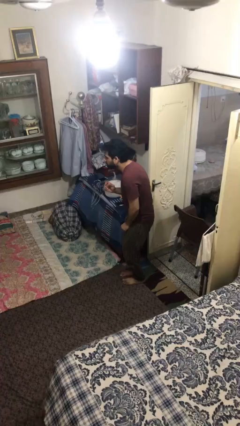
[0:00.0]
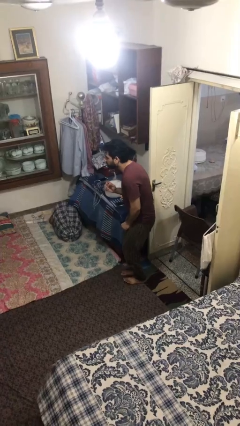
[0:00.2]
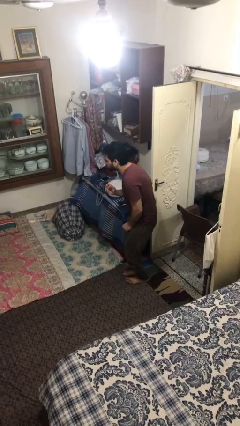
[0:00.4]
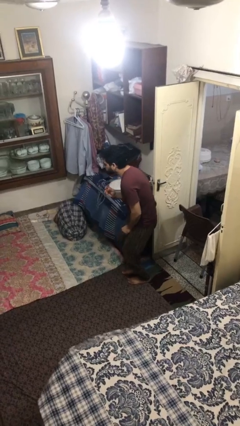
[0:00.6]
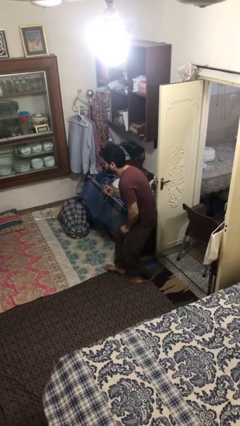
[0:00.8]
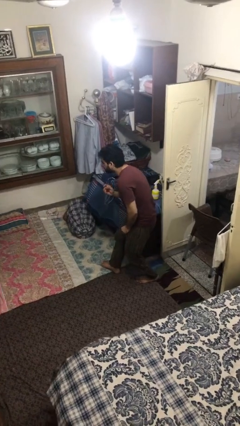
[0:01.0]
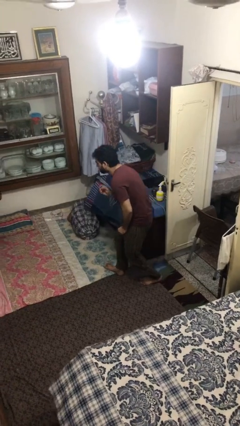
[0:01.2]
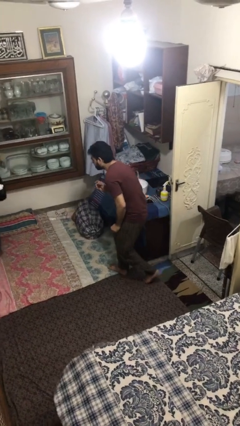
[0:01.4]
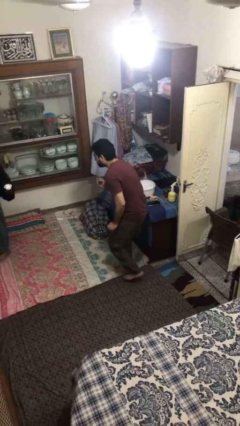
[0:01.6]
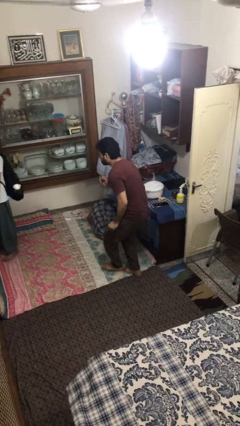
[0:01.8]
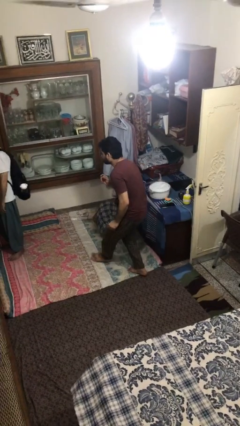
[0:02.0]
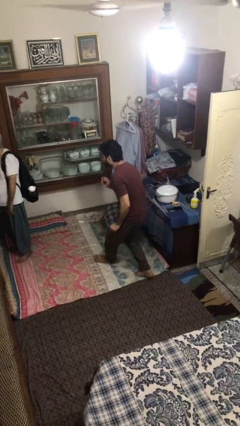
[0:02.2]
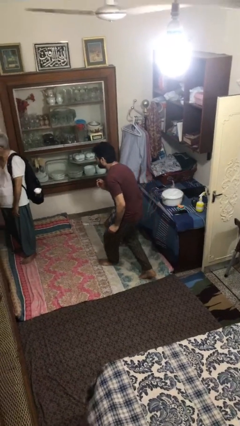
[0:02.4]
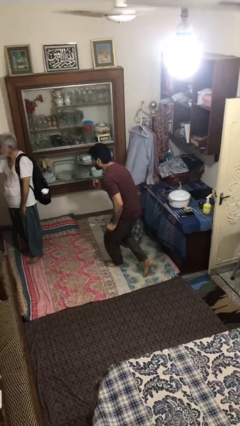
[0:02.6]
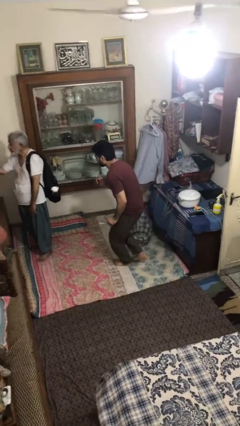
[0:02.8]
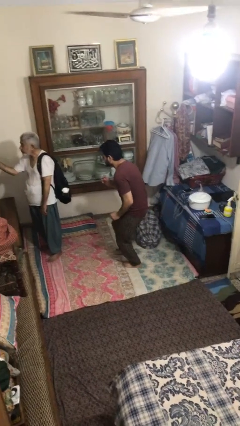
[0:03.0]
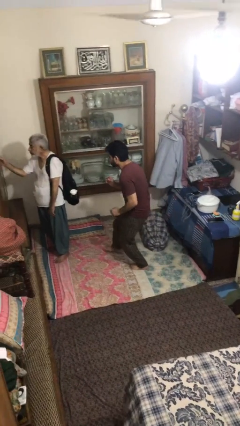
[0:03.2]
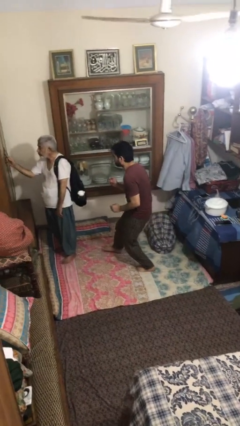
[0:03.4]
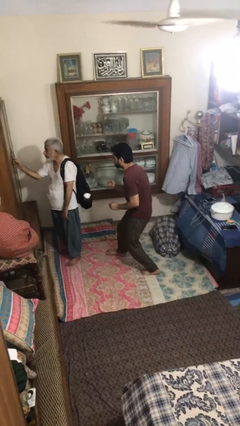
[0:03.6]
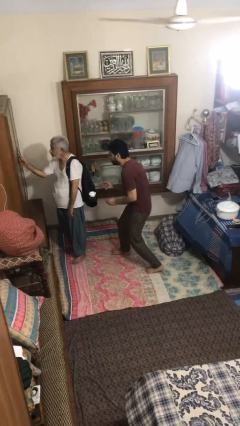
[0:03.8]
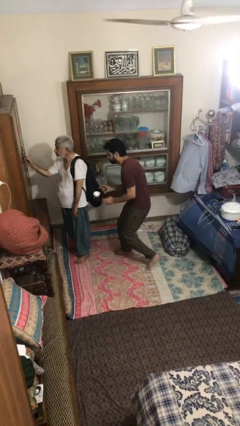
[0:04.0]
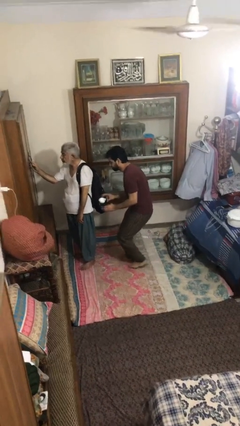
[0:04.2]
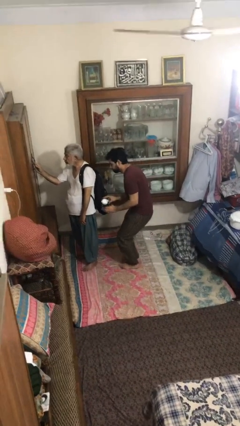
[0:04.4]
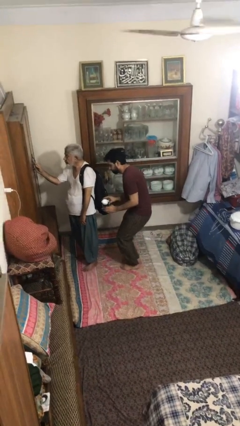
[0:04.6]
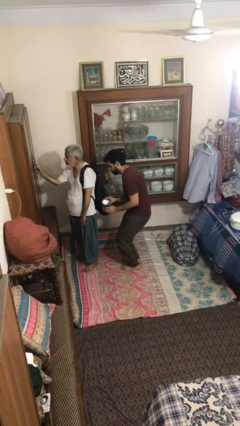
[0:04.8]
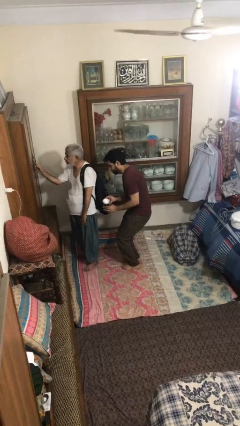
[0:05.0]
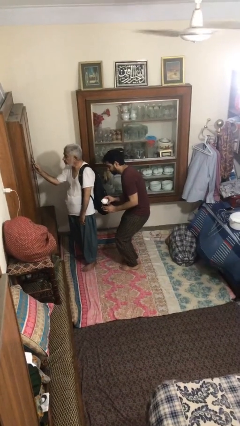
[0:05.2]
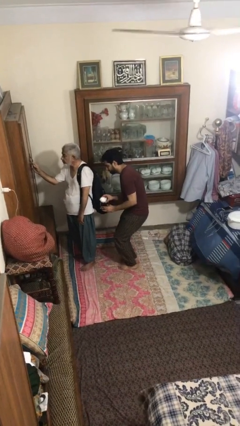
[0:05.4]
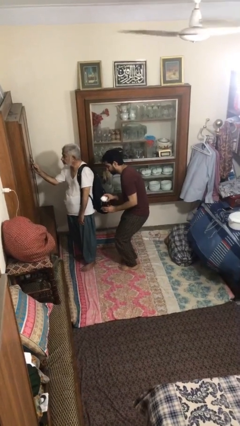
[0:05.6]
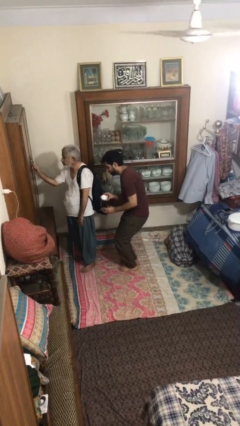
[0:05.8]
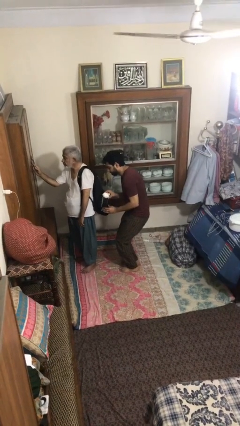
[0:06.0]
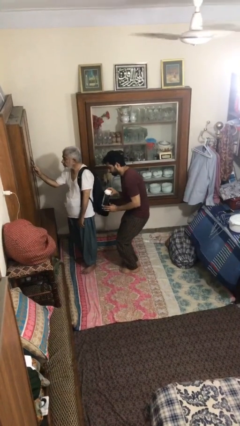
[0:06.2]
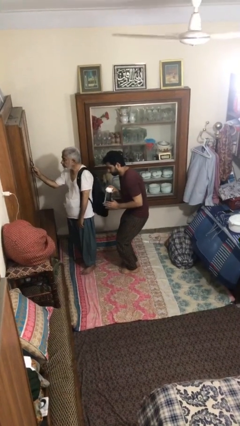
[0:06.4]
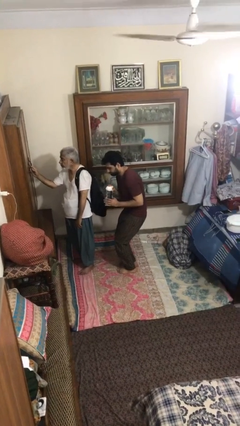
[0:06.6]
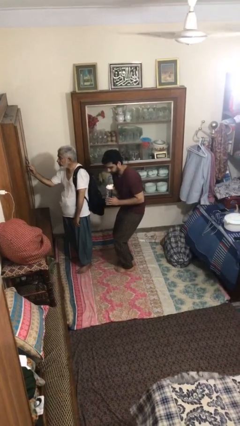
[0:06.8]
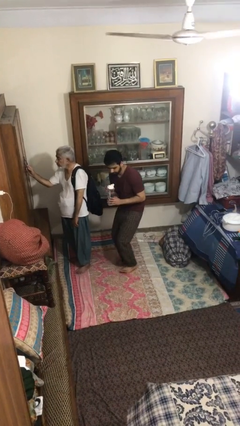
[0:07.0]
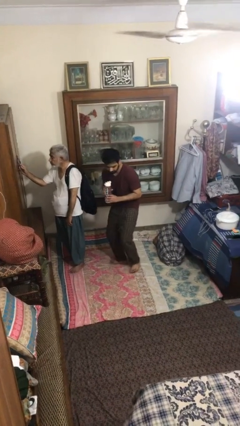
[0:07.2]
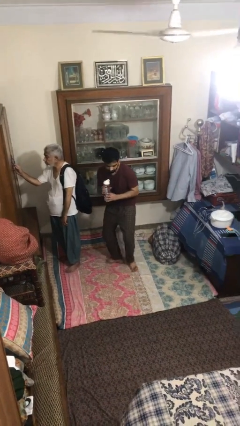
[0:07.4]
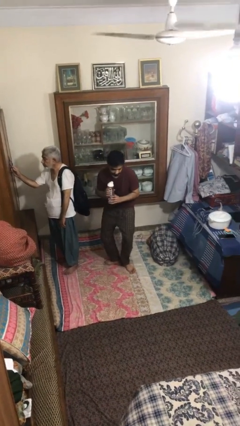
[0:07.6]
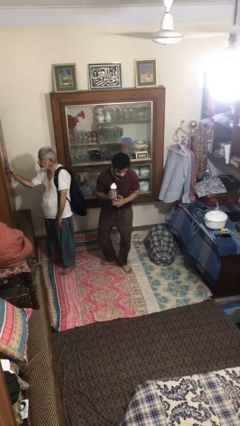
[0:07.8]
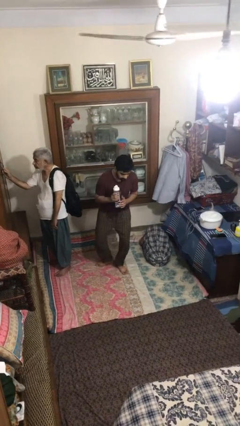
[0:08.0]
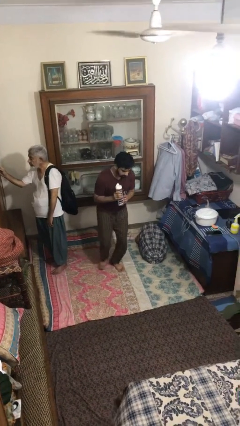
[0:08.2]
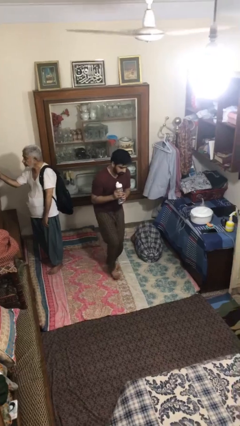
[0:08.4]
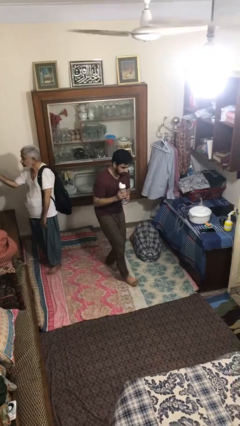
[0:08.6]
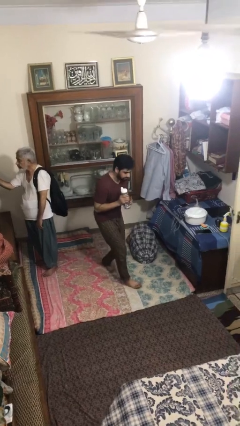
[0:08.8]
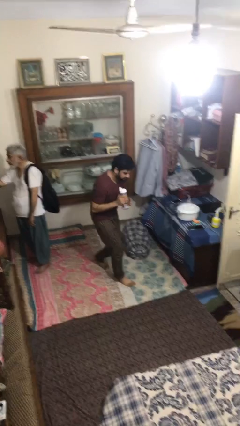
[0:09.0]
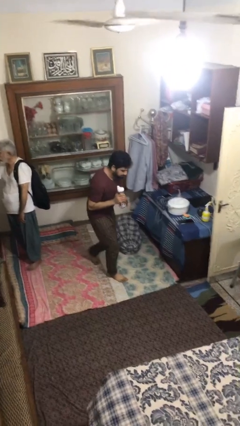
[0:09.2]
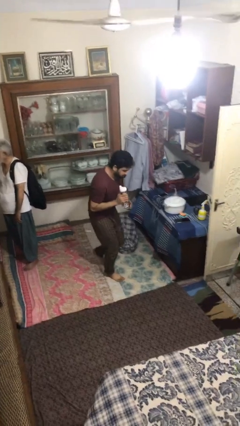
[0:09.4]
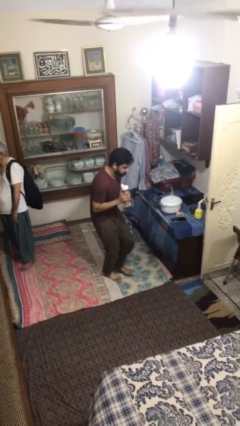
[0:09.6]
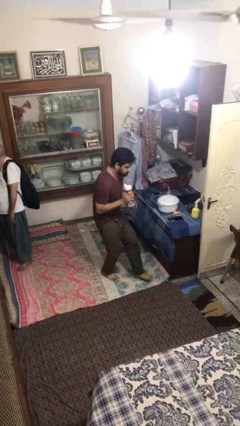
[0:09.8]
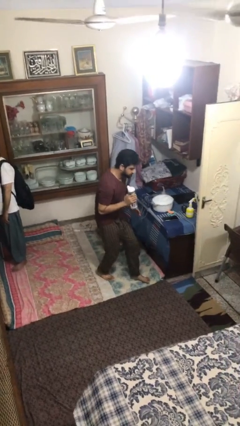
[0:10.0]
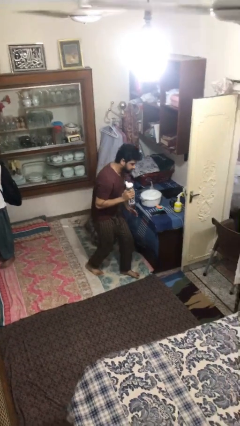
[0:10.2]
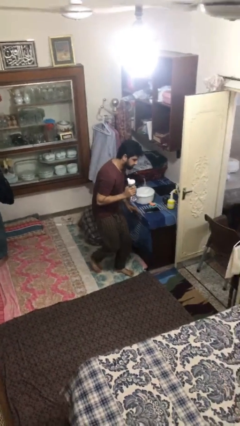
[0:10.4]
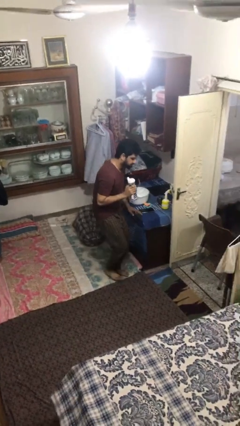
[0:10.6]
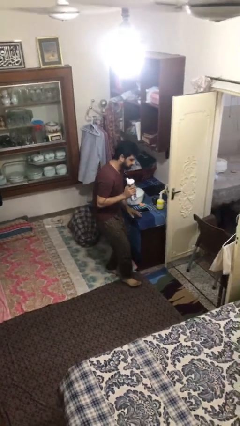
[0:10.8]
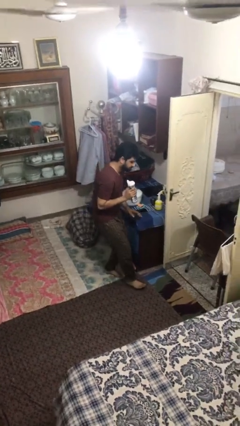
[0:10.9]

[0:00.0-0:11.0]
person steals object from person

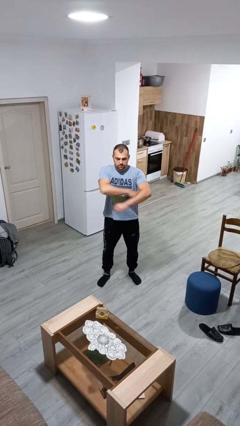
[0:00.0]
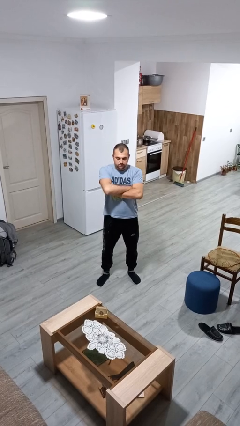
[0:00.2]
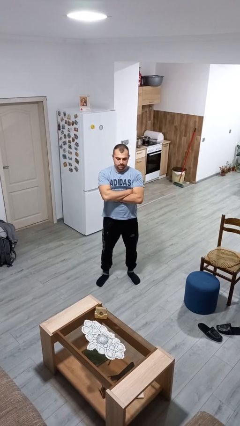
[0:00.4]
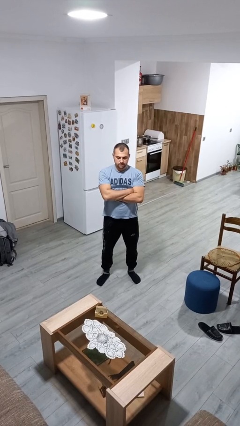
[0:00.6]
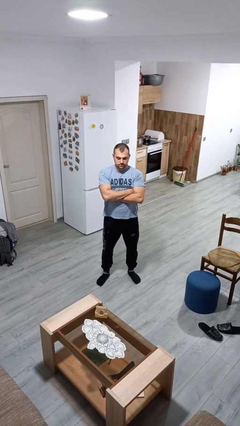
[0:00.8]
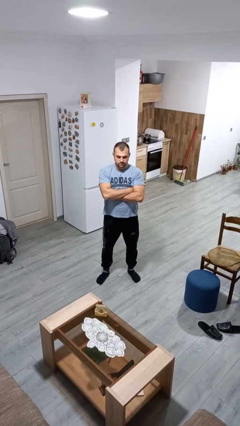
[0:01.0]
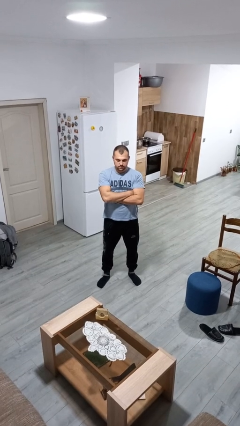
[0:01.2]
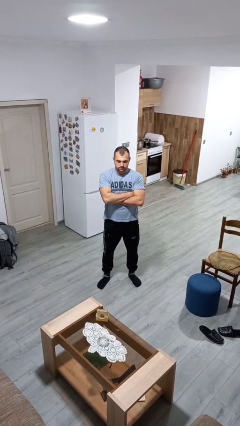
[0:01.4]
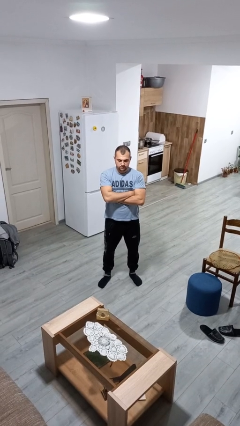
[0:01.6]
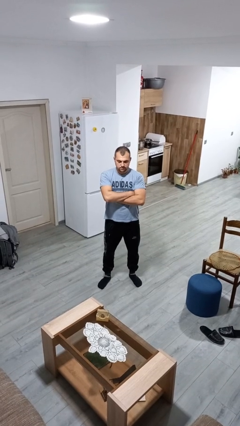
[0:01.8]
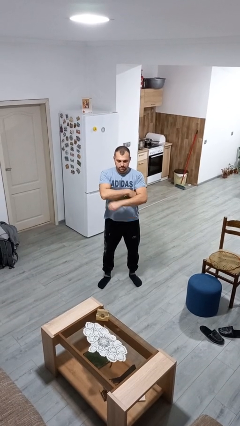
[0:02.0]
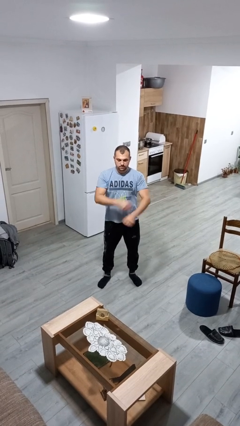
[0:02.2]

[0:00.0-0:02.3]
person crosses arms

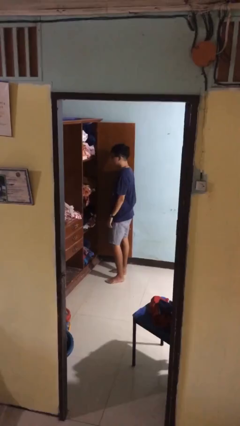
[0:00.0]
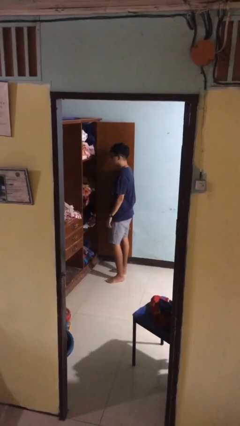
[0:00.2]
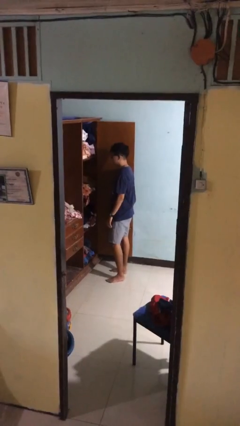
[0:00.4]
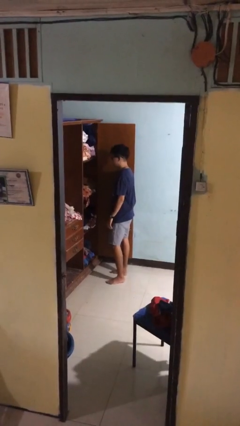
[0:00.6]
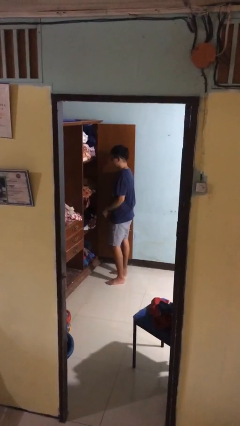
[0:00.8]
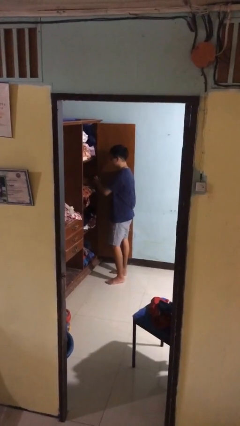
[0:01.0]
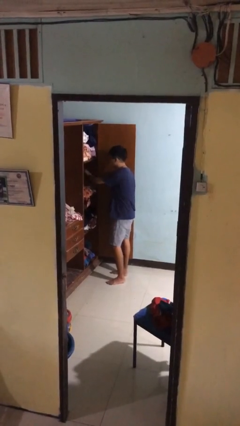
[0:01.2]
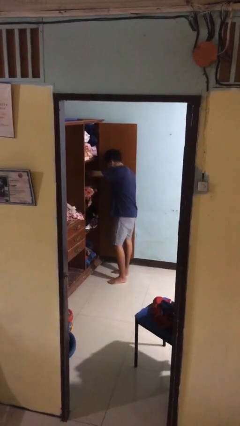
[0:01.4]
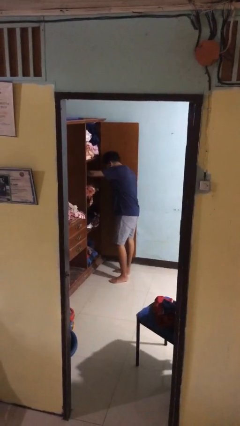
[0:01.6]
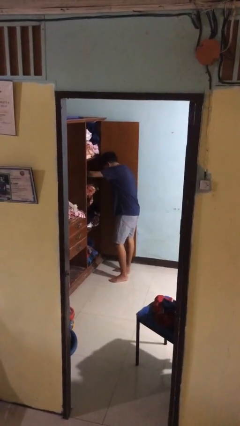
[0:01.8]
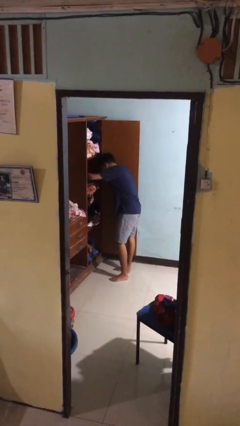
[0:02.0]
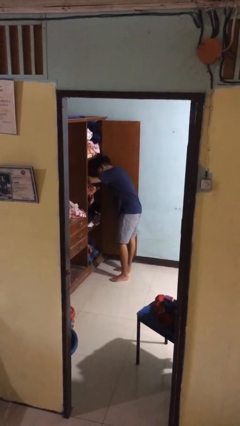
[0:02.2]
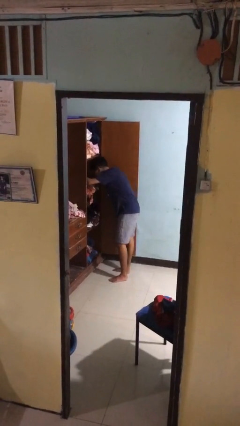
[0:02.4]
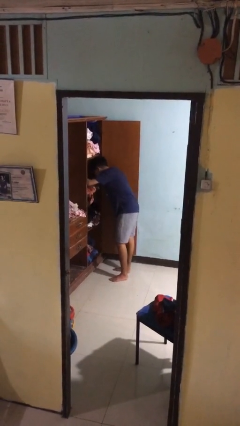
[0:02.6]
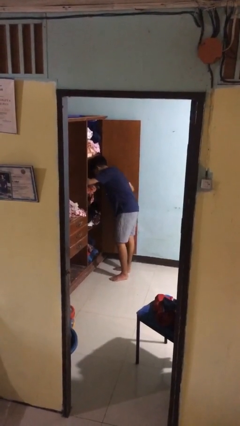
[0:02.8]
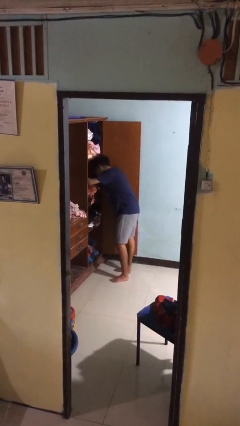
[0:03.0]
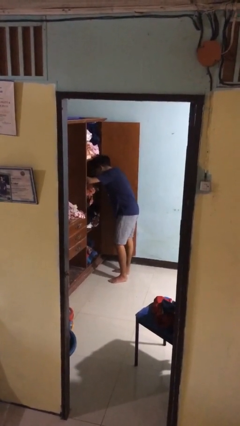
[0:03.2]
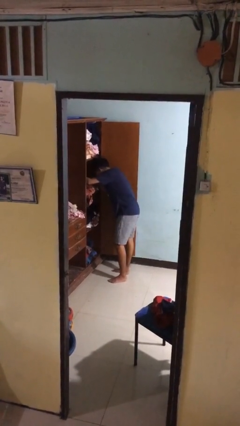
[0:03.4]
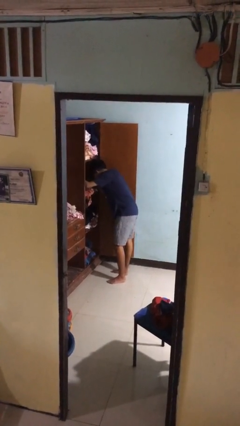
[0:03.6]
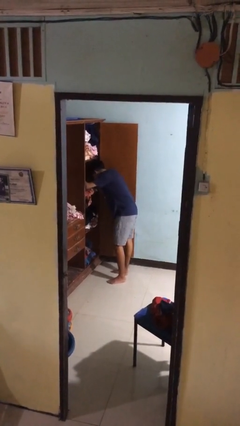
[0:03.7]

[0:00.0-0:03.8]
person searches in cabinet

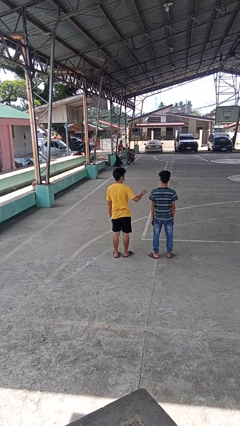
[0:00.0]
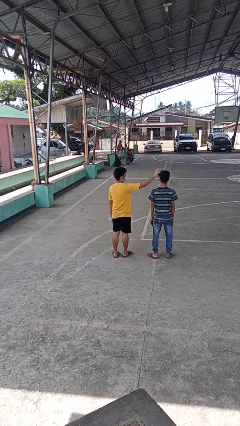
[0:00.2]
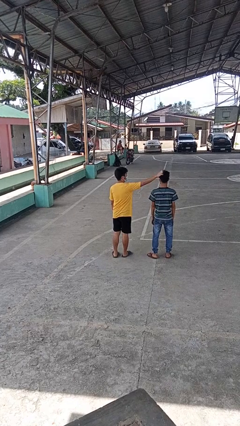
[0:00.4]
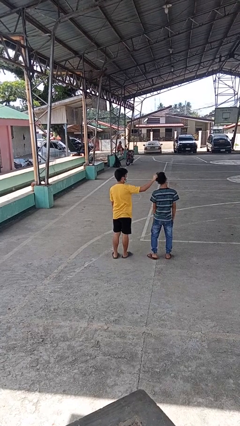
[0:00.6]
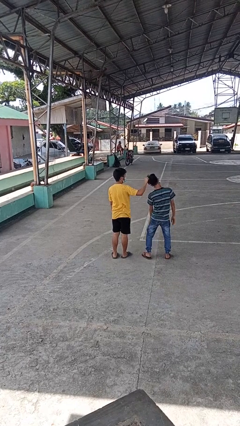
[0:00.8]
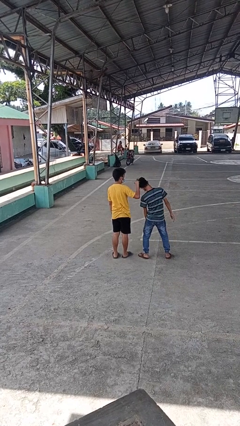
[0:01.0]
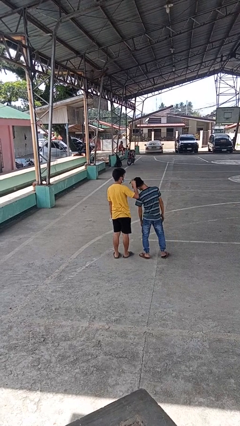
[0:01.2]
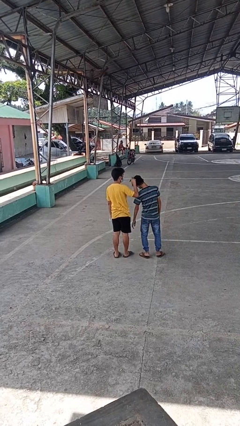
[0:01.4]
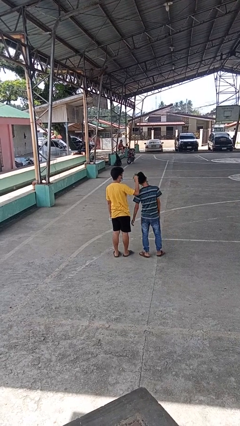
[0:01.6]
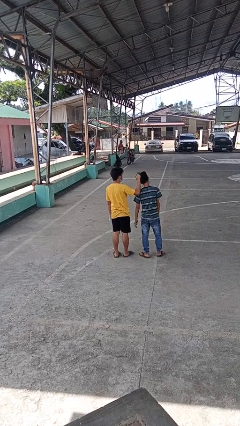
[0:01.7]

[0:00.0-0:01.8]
person grabs person by hair
